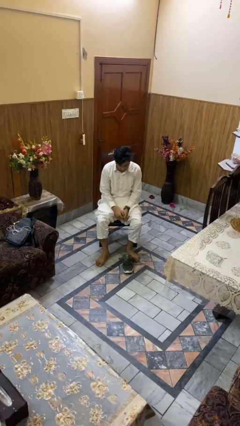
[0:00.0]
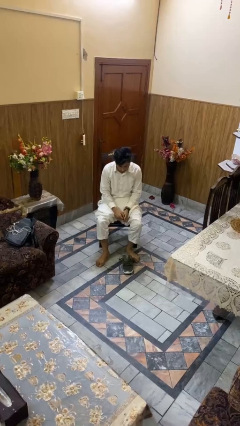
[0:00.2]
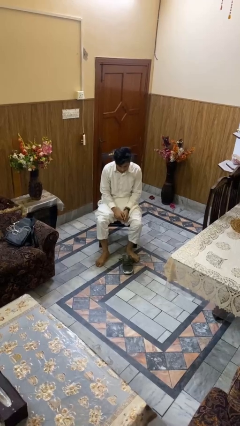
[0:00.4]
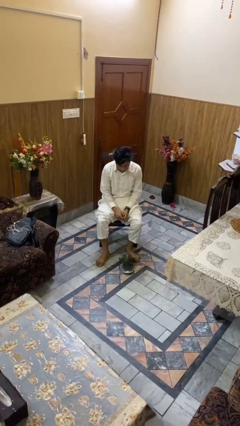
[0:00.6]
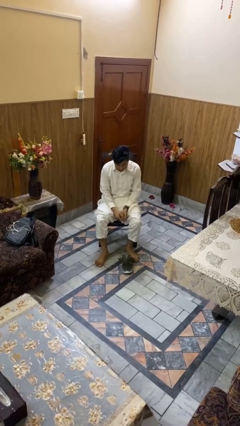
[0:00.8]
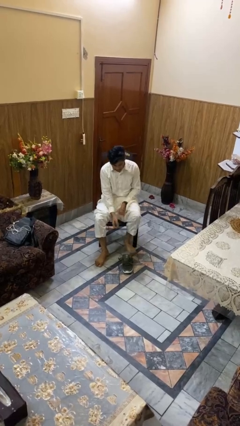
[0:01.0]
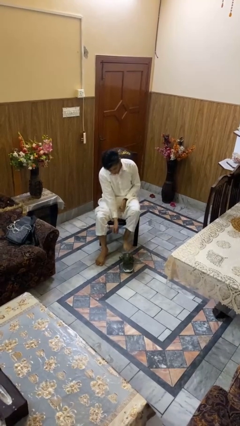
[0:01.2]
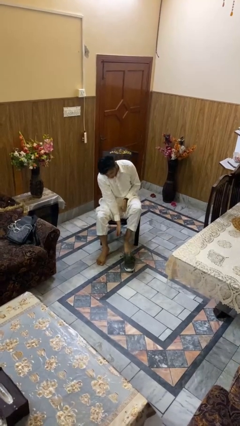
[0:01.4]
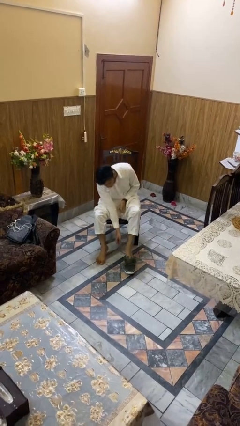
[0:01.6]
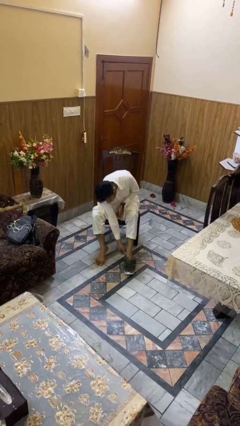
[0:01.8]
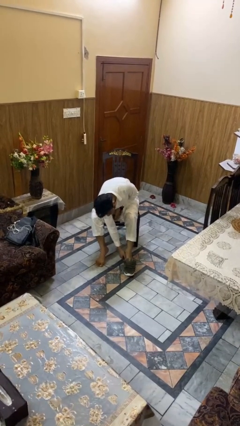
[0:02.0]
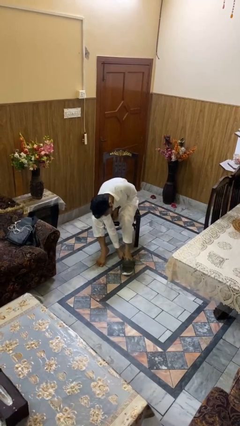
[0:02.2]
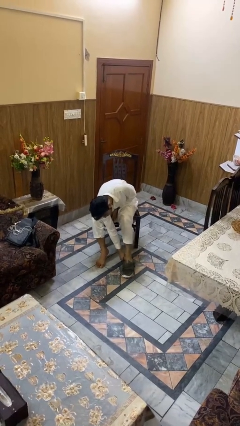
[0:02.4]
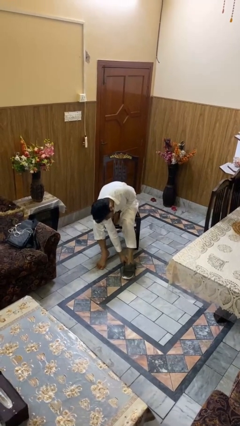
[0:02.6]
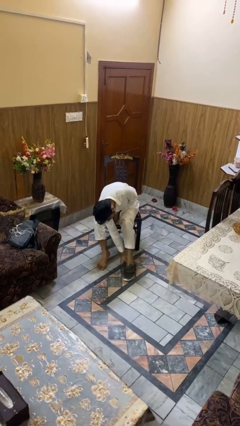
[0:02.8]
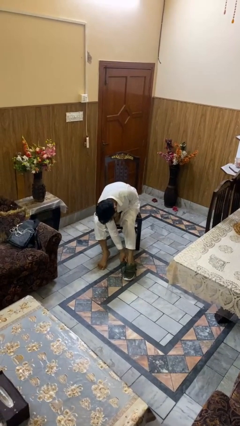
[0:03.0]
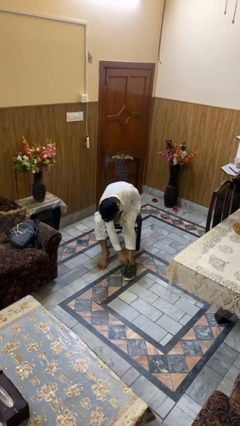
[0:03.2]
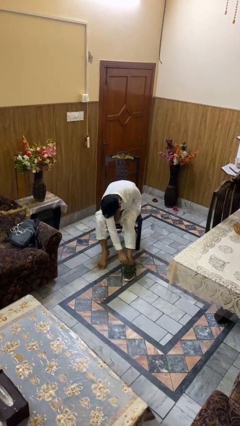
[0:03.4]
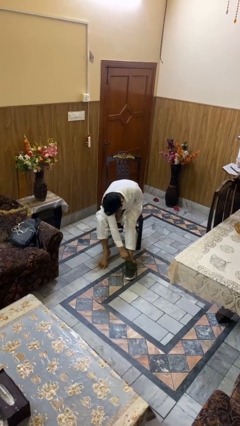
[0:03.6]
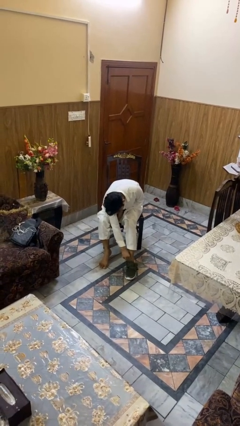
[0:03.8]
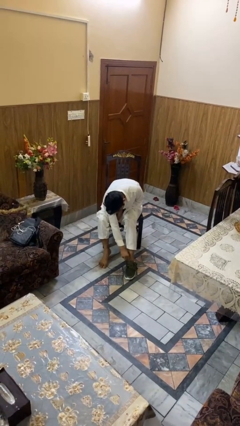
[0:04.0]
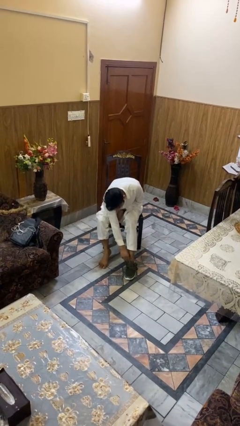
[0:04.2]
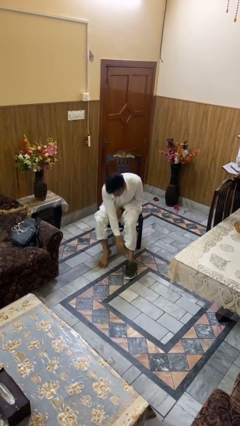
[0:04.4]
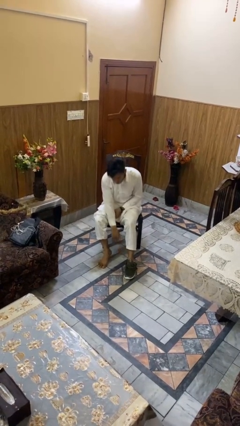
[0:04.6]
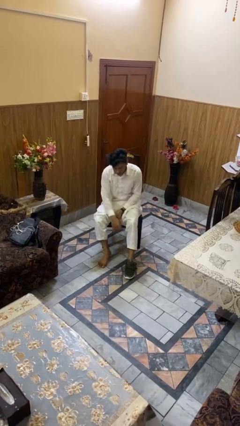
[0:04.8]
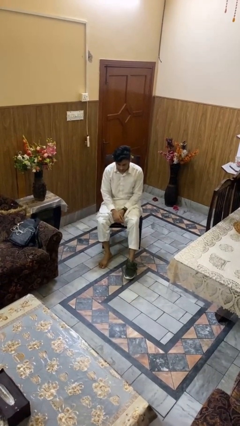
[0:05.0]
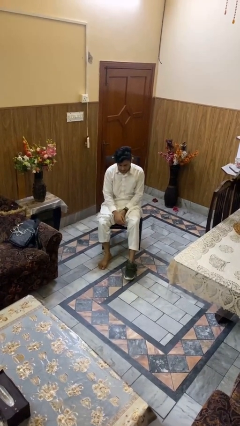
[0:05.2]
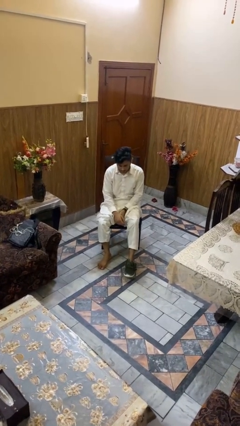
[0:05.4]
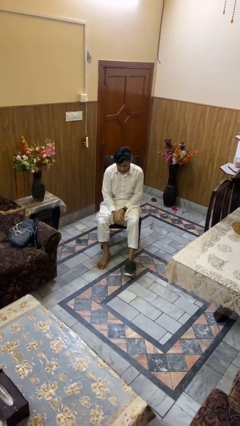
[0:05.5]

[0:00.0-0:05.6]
person puts on shoes

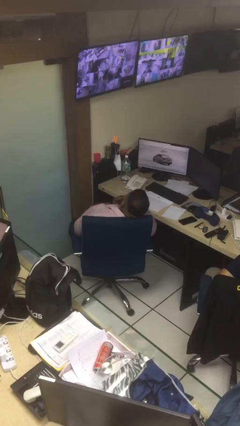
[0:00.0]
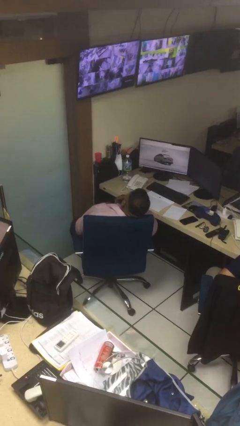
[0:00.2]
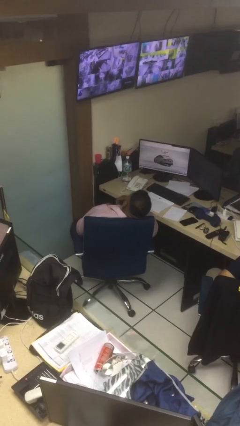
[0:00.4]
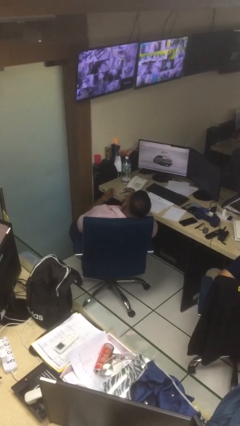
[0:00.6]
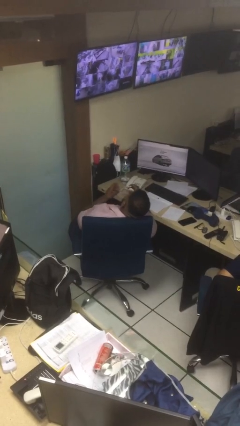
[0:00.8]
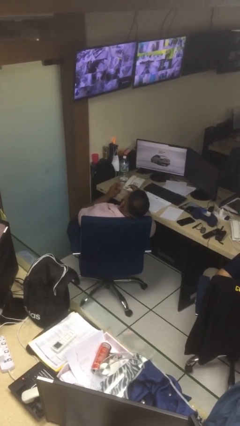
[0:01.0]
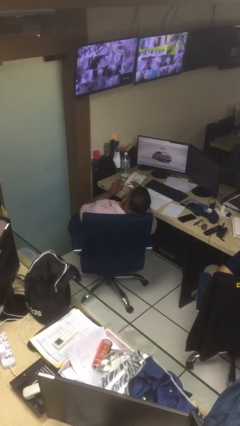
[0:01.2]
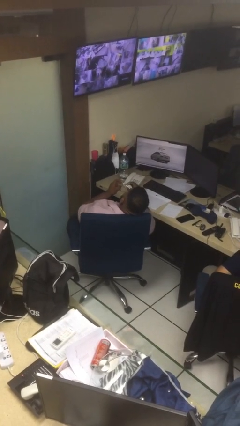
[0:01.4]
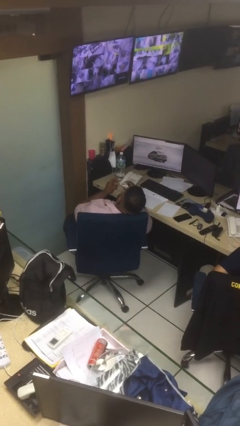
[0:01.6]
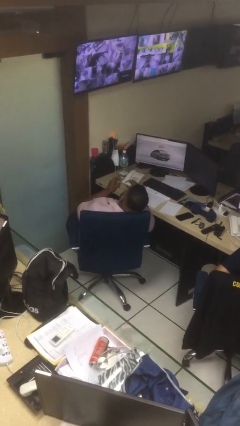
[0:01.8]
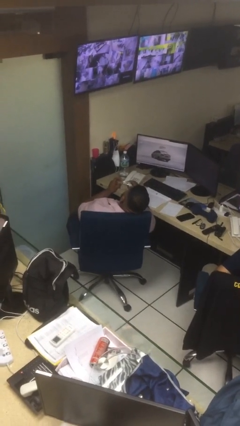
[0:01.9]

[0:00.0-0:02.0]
person clips fingernails

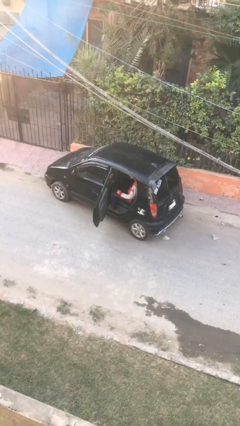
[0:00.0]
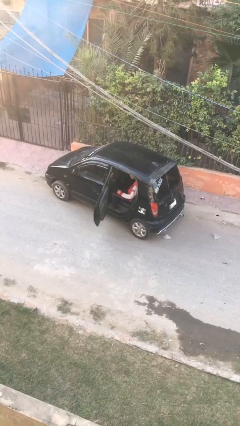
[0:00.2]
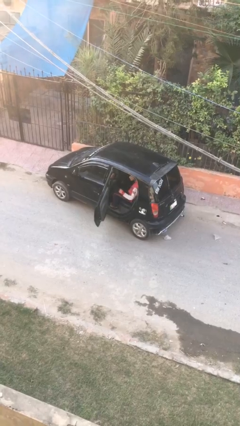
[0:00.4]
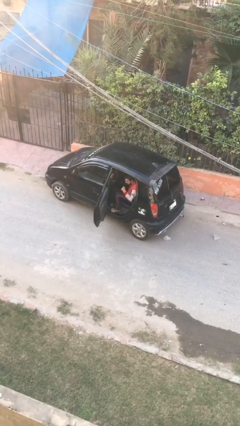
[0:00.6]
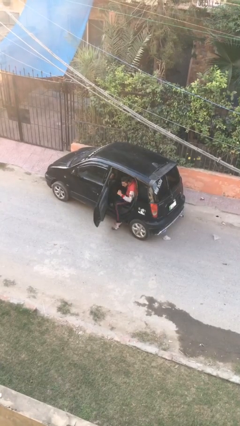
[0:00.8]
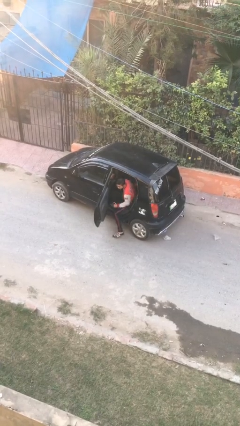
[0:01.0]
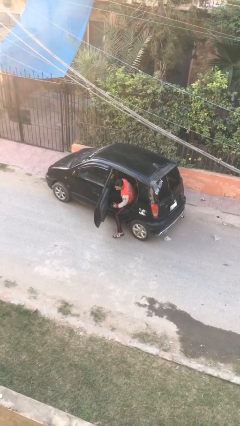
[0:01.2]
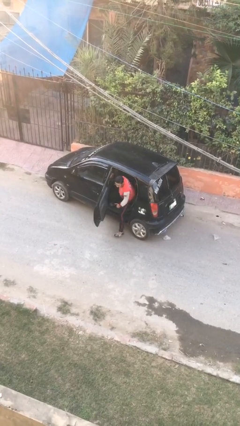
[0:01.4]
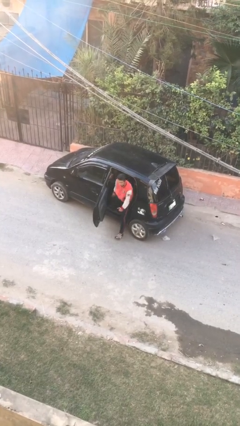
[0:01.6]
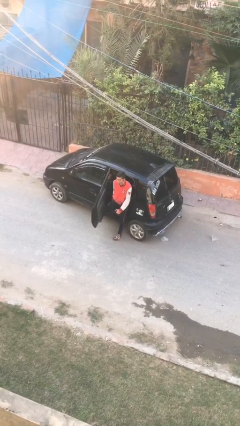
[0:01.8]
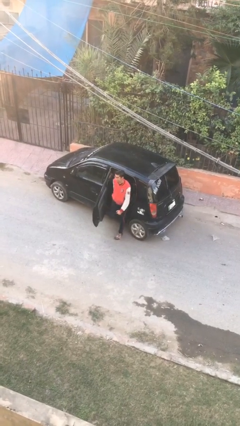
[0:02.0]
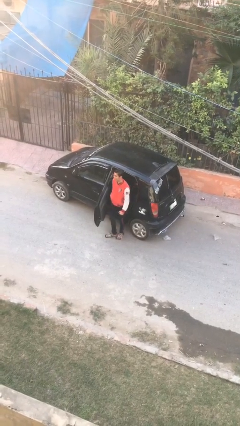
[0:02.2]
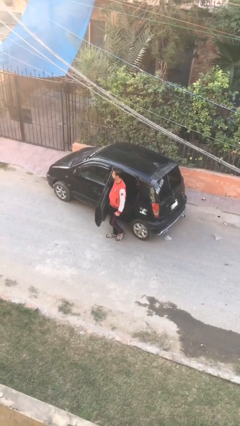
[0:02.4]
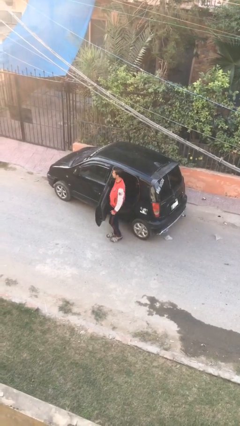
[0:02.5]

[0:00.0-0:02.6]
person exits car

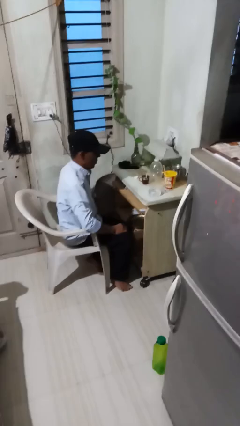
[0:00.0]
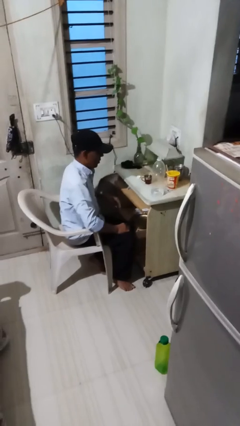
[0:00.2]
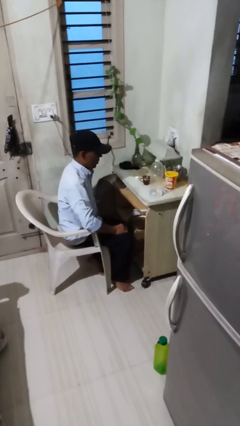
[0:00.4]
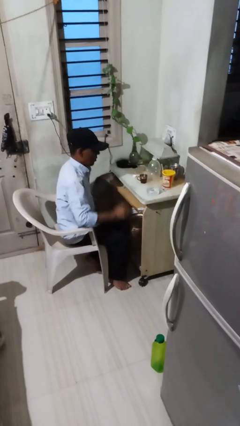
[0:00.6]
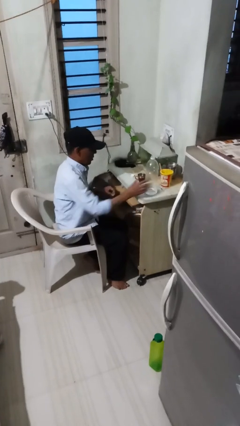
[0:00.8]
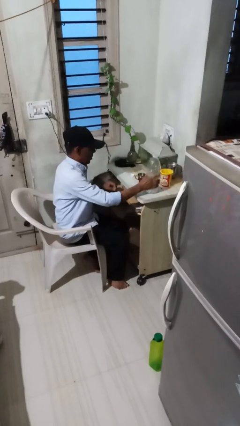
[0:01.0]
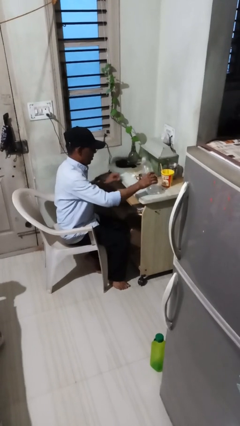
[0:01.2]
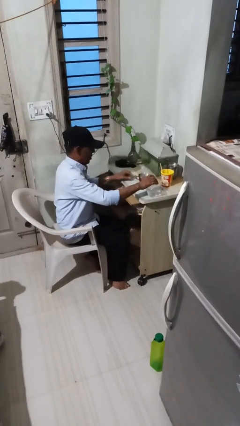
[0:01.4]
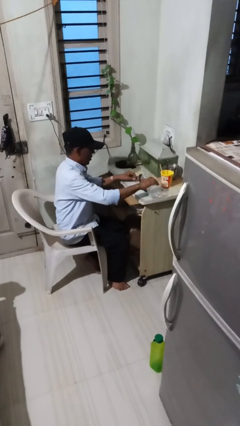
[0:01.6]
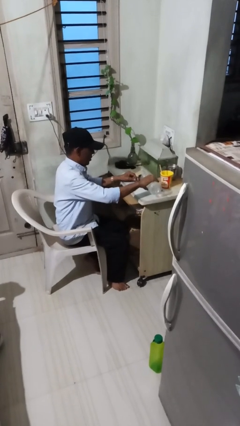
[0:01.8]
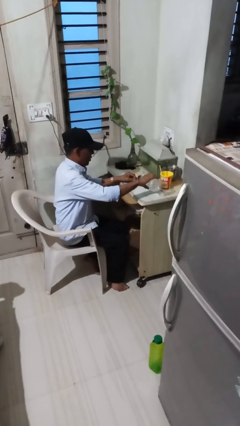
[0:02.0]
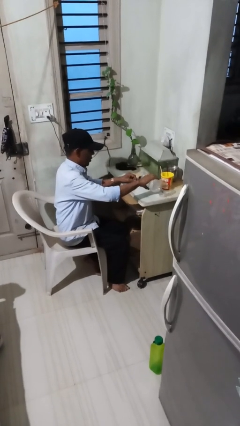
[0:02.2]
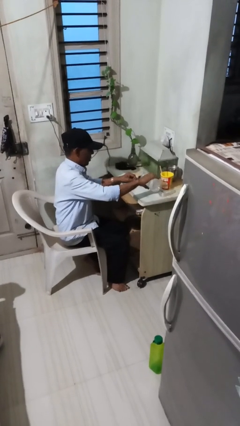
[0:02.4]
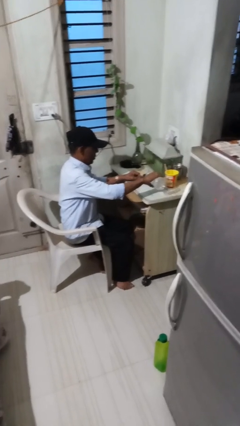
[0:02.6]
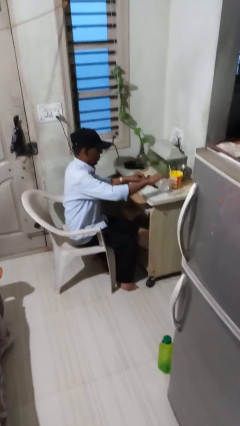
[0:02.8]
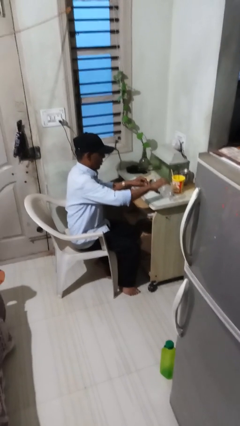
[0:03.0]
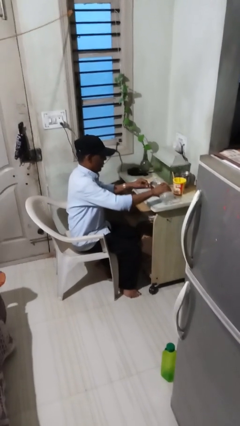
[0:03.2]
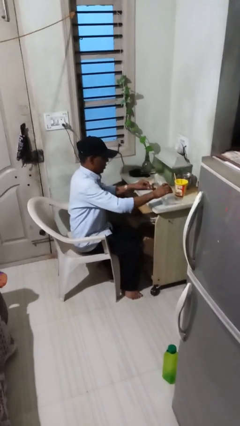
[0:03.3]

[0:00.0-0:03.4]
person pours liquid into cup

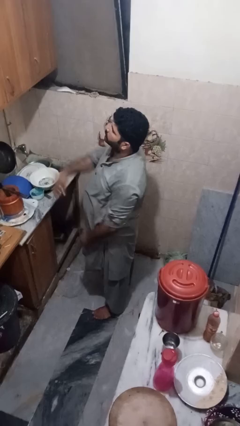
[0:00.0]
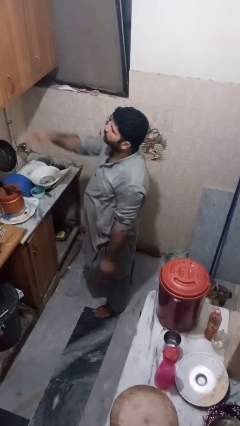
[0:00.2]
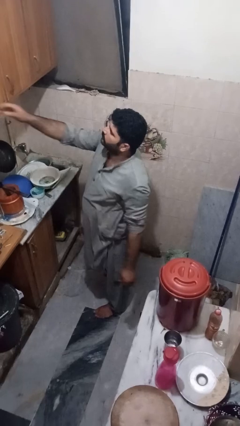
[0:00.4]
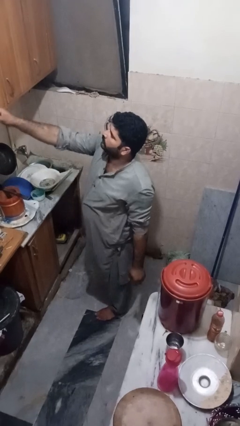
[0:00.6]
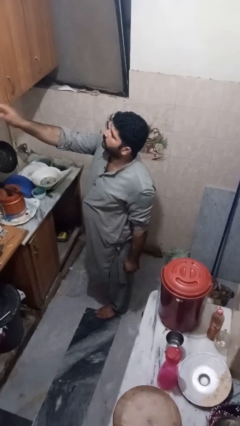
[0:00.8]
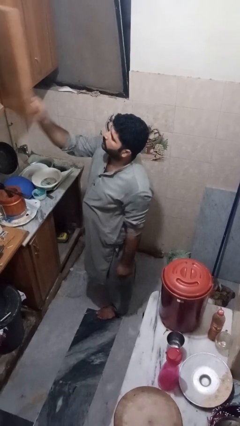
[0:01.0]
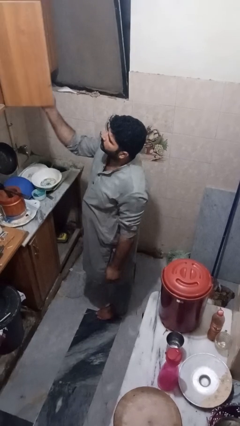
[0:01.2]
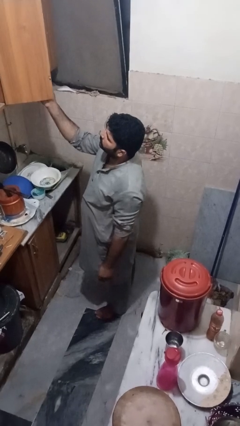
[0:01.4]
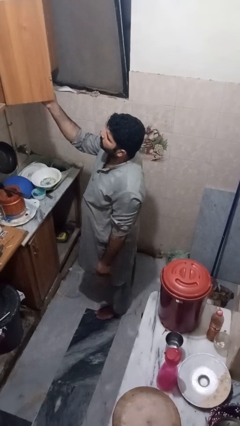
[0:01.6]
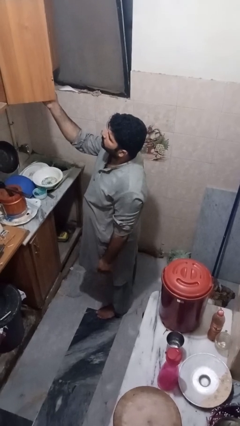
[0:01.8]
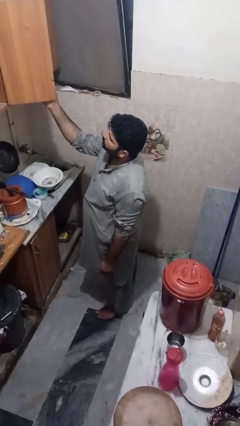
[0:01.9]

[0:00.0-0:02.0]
person opens cabinet

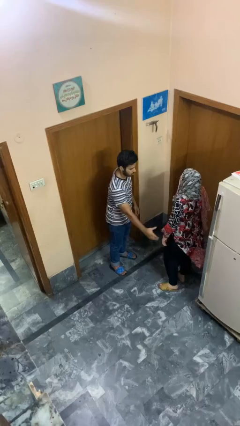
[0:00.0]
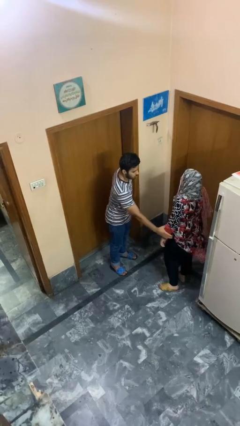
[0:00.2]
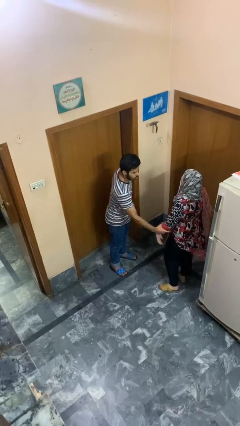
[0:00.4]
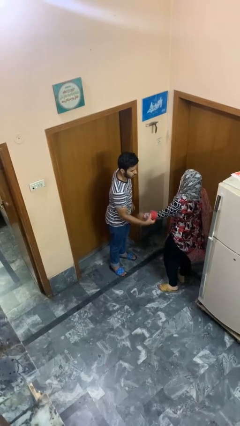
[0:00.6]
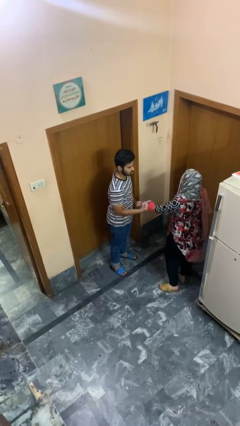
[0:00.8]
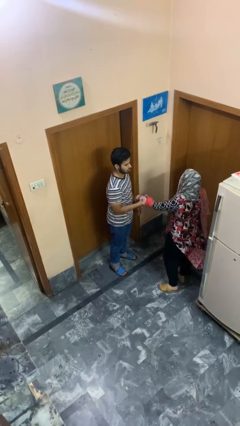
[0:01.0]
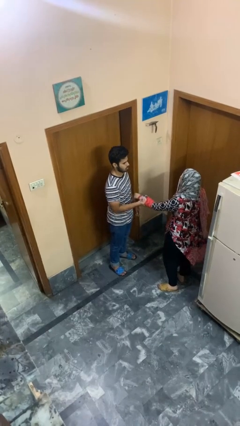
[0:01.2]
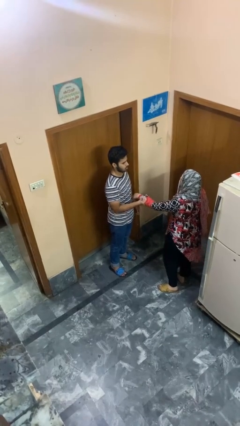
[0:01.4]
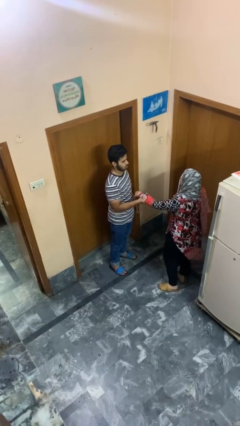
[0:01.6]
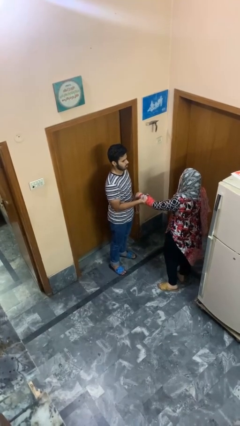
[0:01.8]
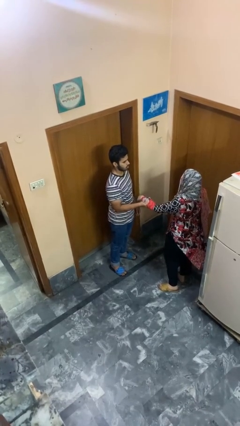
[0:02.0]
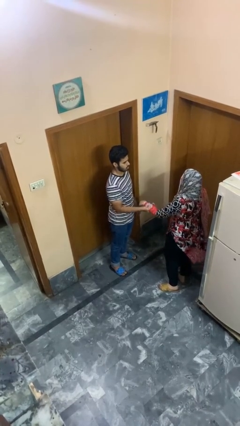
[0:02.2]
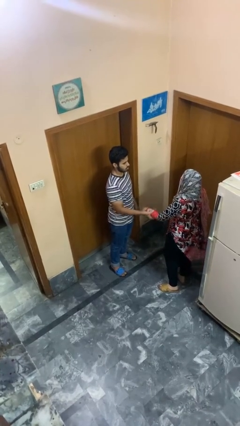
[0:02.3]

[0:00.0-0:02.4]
person grabs person by forearm
